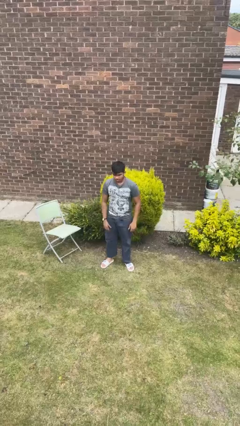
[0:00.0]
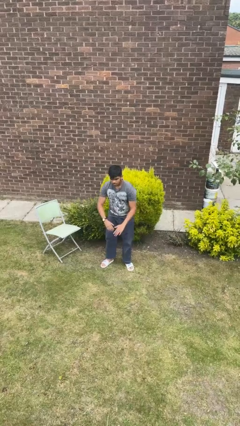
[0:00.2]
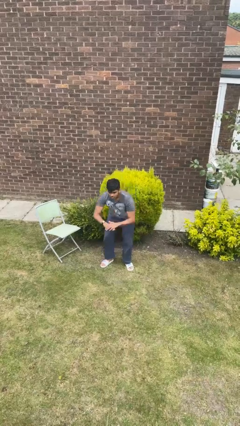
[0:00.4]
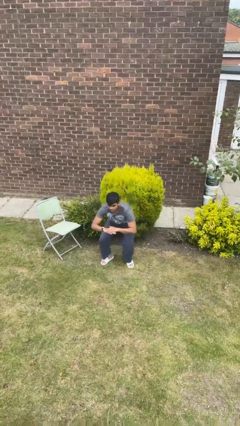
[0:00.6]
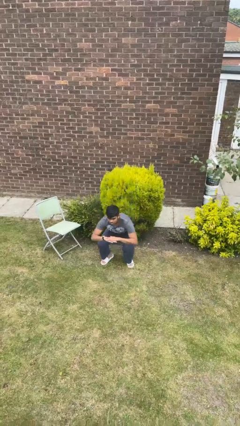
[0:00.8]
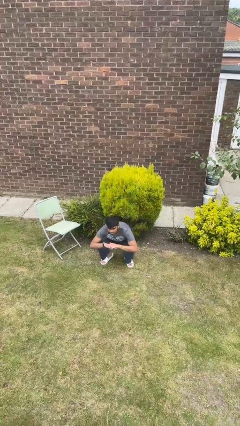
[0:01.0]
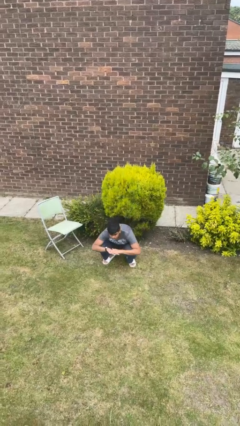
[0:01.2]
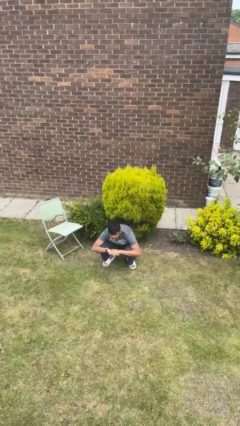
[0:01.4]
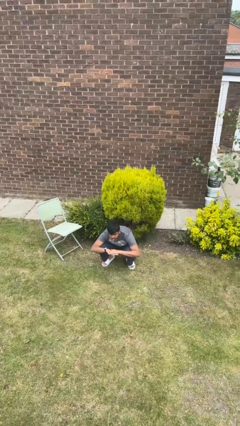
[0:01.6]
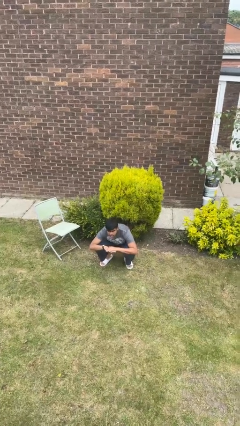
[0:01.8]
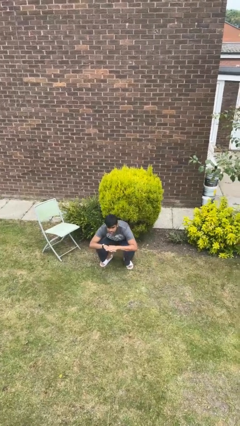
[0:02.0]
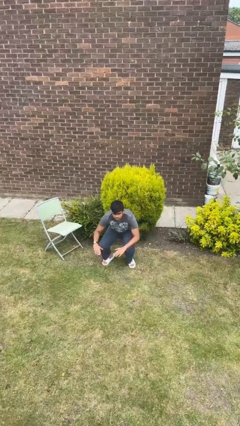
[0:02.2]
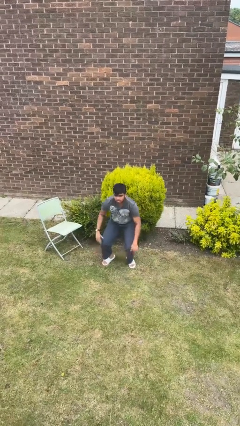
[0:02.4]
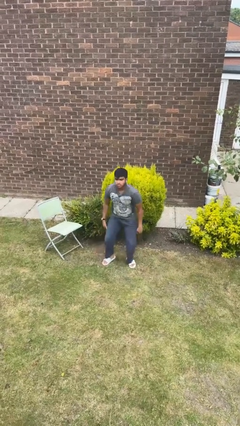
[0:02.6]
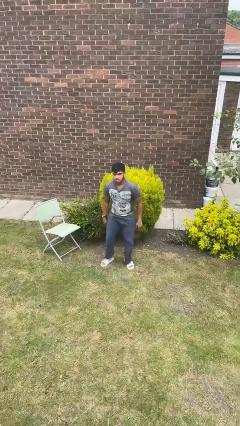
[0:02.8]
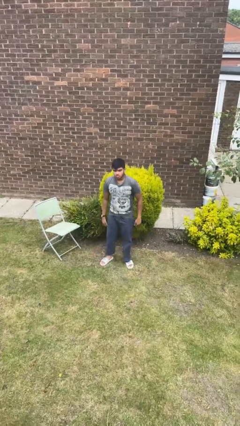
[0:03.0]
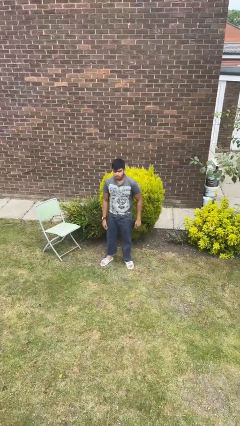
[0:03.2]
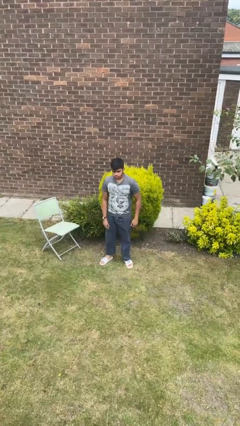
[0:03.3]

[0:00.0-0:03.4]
person squats

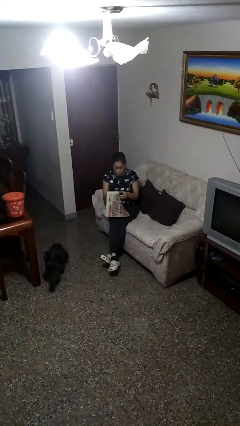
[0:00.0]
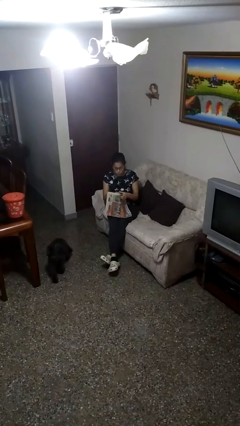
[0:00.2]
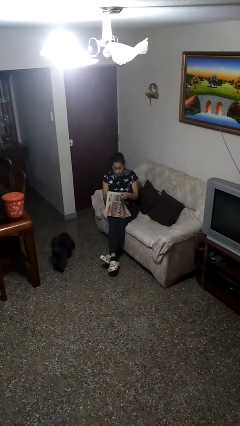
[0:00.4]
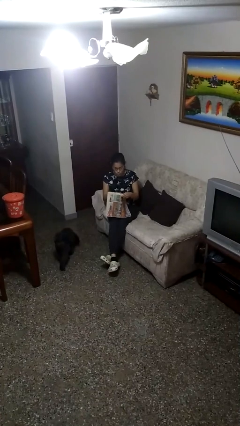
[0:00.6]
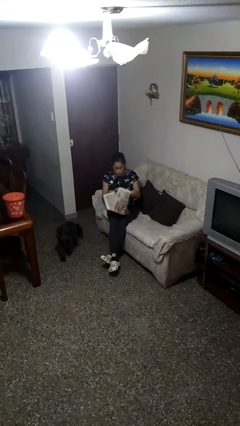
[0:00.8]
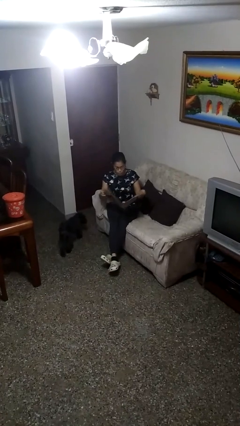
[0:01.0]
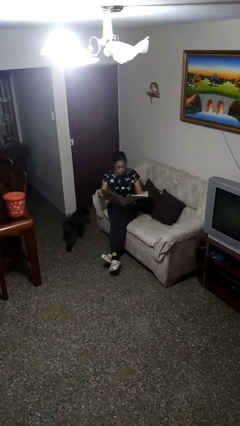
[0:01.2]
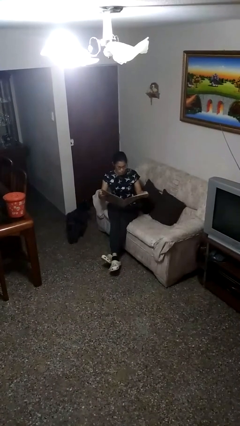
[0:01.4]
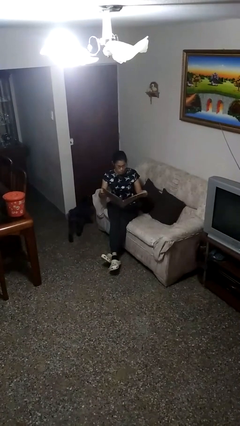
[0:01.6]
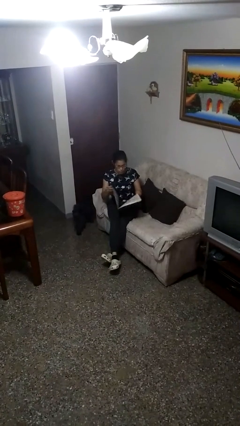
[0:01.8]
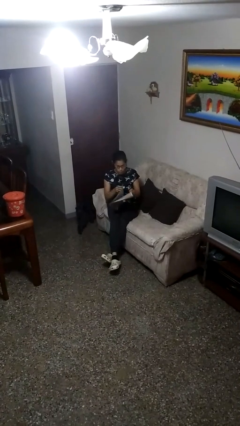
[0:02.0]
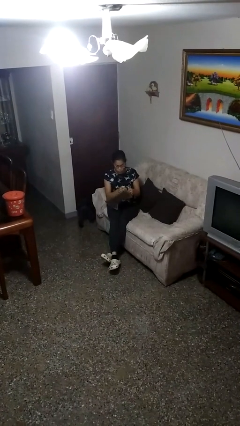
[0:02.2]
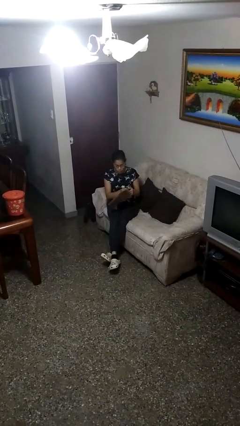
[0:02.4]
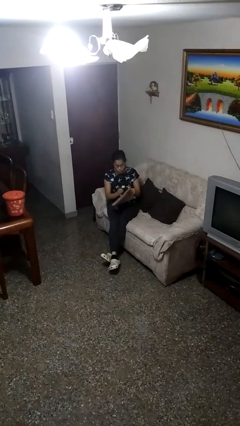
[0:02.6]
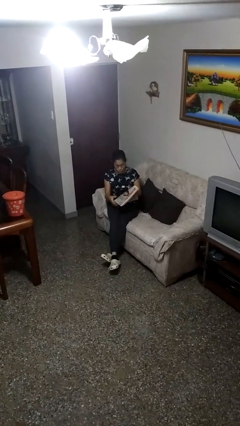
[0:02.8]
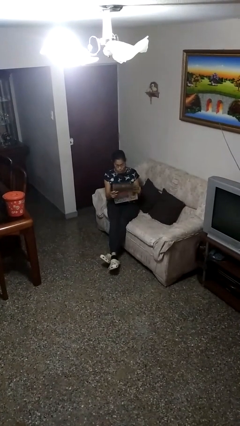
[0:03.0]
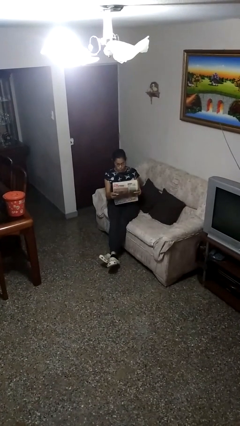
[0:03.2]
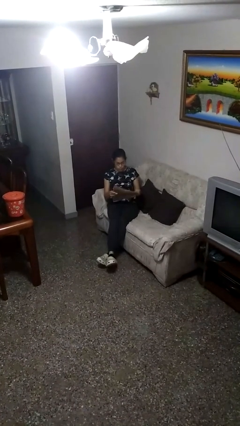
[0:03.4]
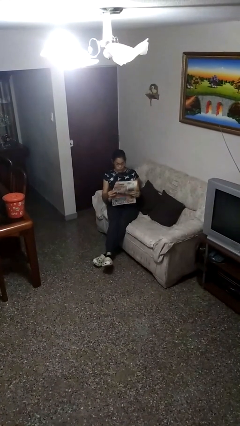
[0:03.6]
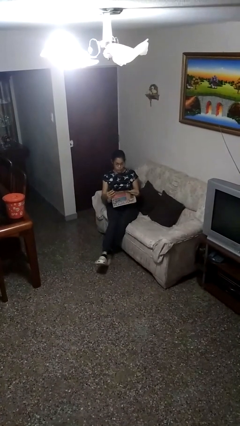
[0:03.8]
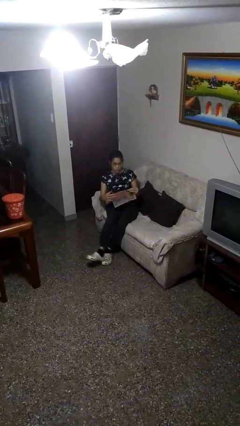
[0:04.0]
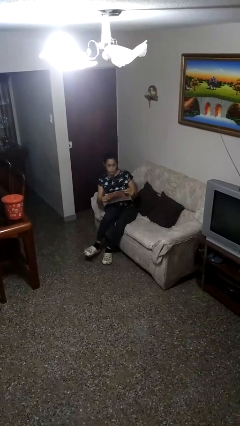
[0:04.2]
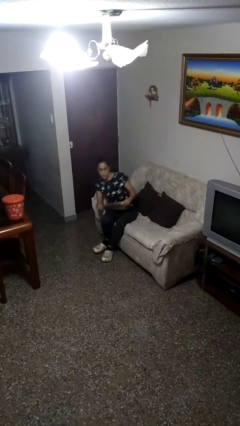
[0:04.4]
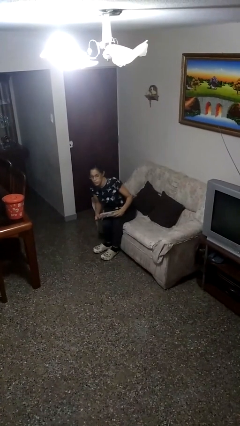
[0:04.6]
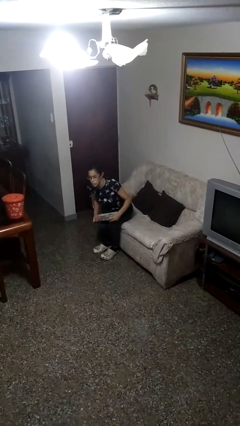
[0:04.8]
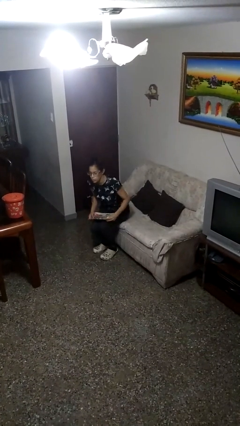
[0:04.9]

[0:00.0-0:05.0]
person reads newspaper

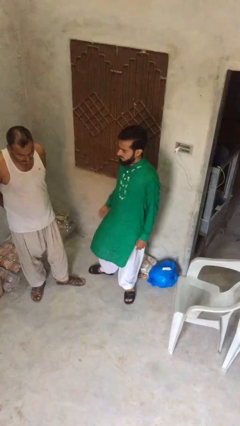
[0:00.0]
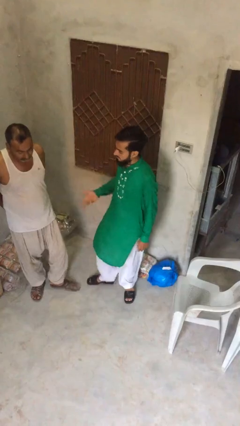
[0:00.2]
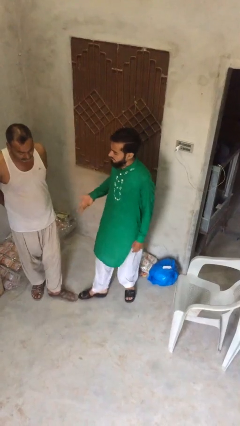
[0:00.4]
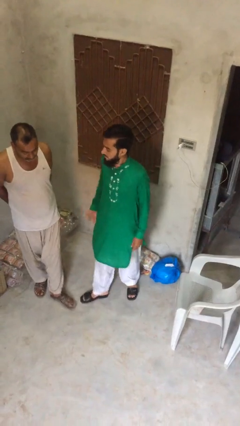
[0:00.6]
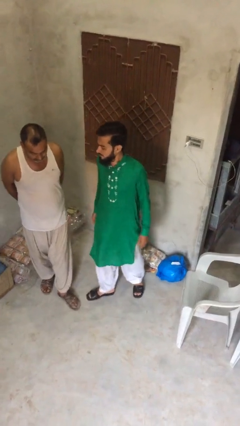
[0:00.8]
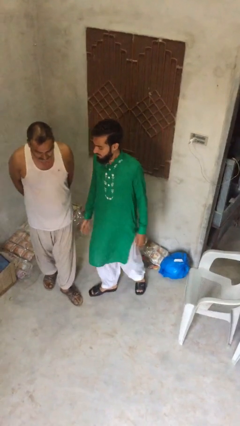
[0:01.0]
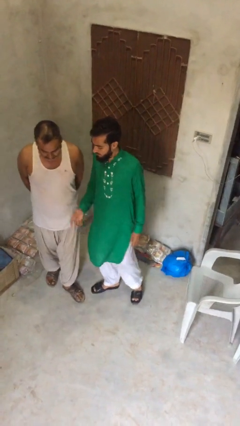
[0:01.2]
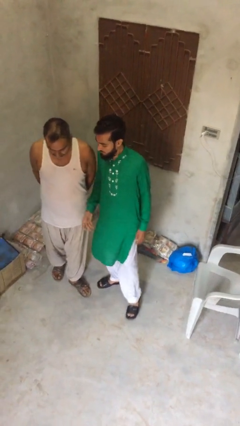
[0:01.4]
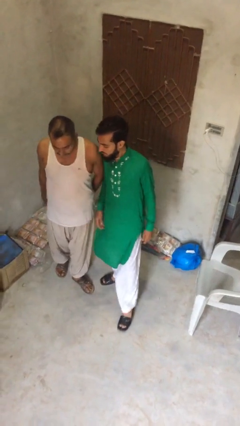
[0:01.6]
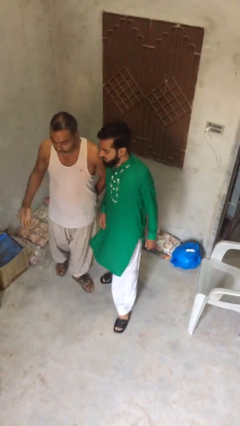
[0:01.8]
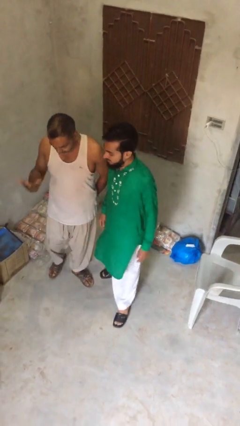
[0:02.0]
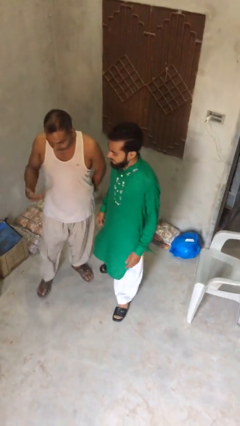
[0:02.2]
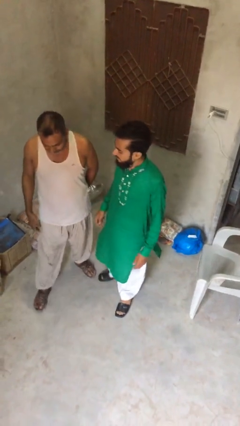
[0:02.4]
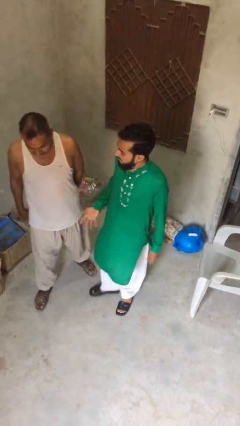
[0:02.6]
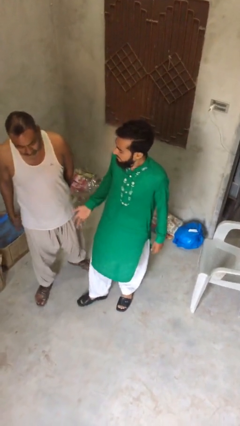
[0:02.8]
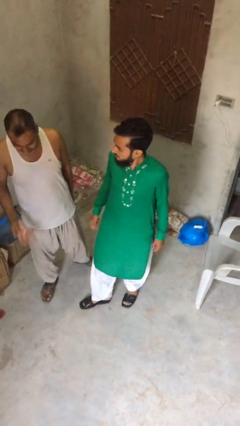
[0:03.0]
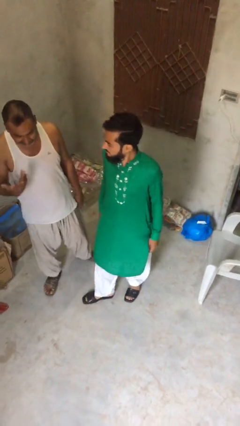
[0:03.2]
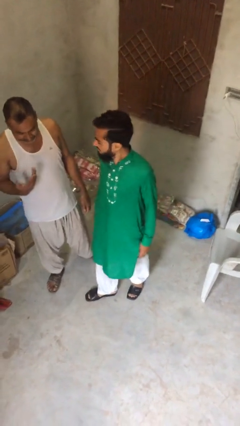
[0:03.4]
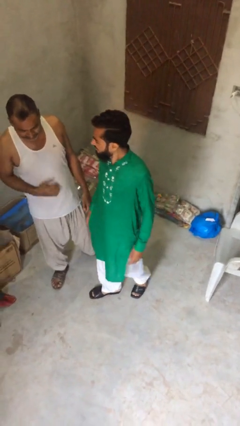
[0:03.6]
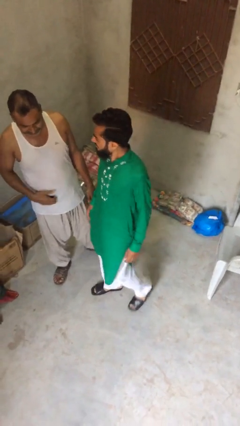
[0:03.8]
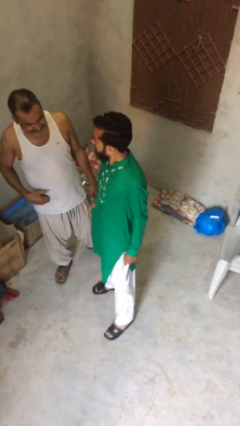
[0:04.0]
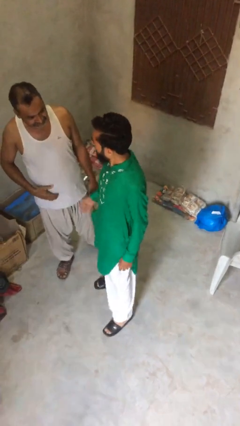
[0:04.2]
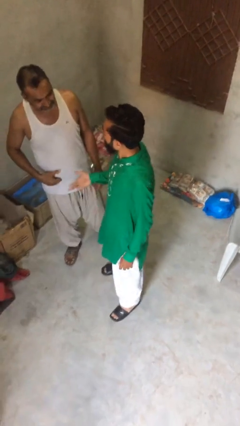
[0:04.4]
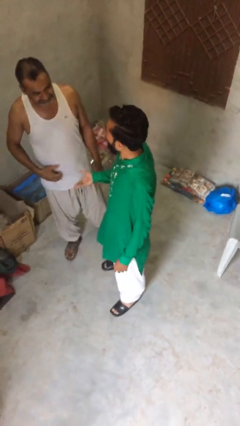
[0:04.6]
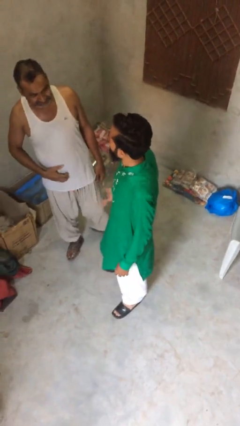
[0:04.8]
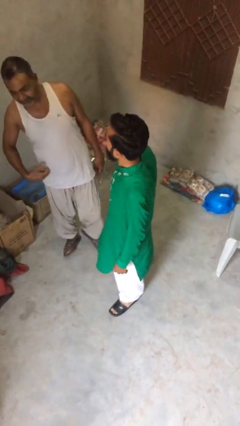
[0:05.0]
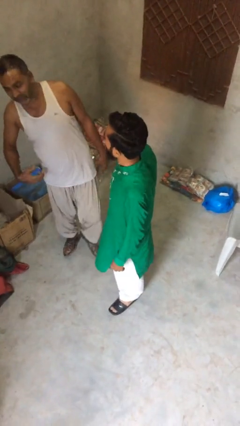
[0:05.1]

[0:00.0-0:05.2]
person talks to person

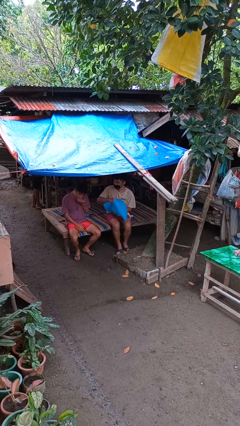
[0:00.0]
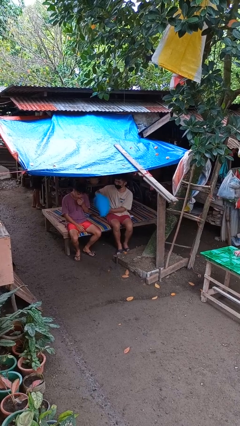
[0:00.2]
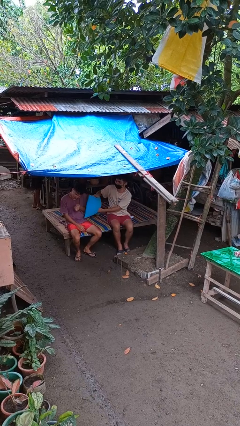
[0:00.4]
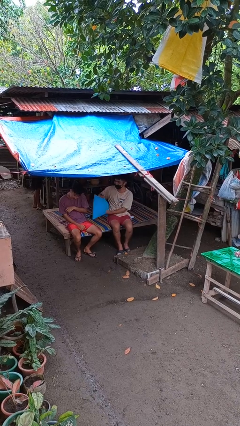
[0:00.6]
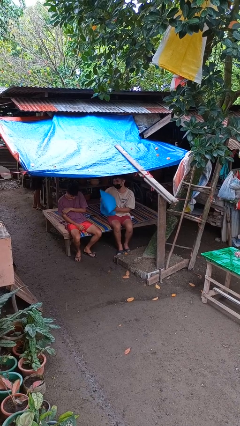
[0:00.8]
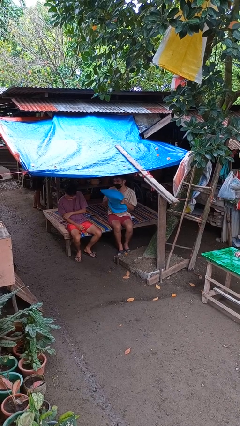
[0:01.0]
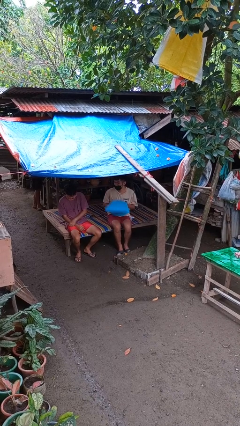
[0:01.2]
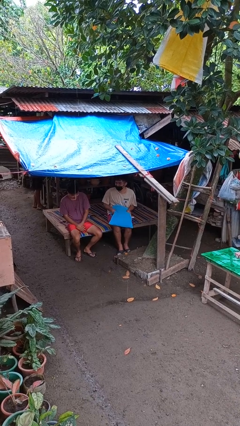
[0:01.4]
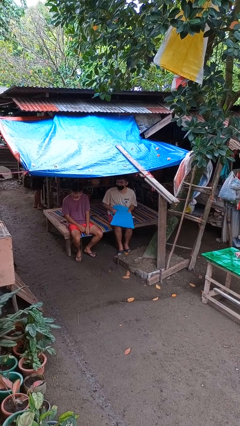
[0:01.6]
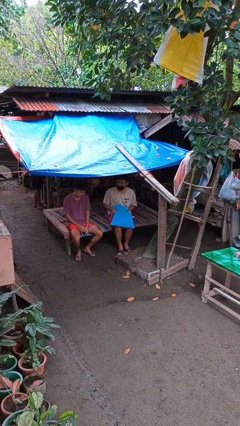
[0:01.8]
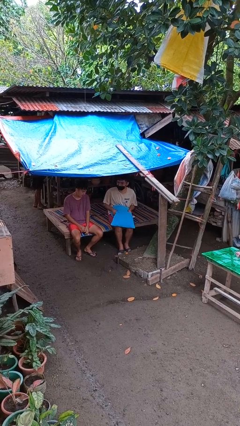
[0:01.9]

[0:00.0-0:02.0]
person hits person with pillow

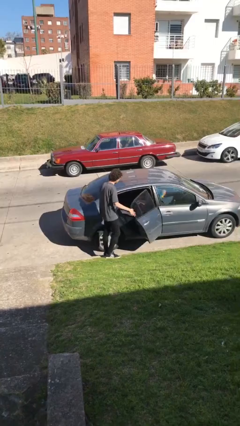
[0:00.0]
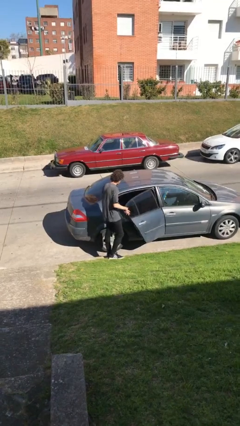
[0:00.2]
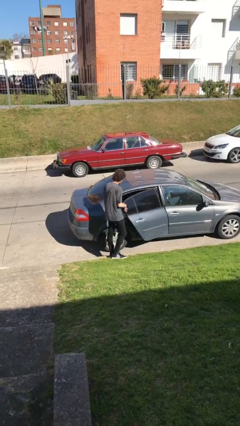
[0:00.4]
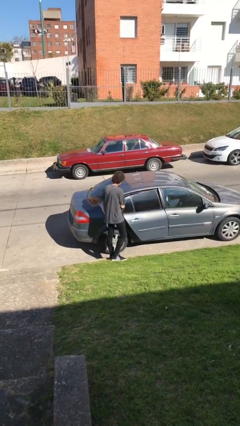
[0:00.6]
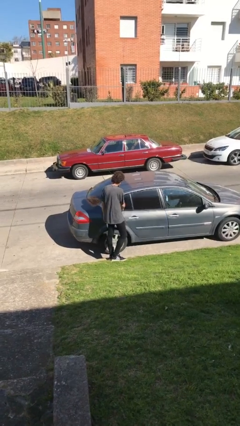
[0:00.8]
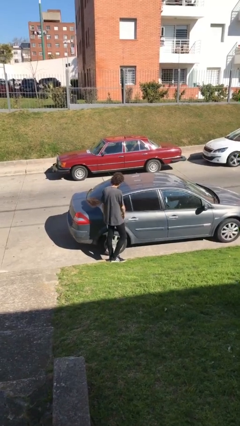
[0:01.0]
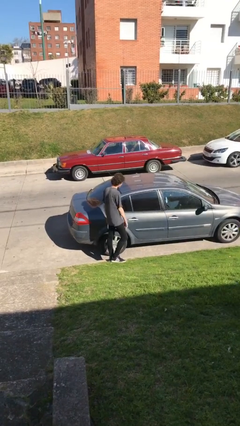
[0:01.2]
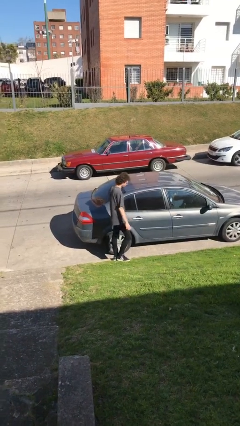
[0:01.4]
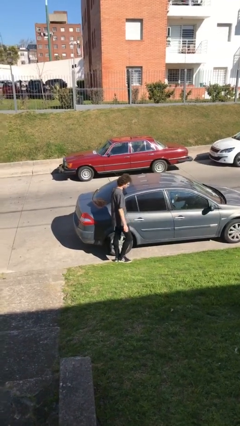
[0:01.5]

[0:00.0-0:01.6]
person closes car door

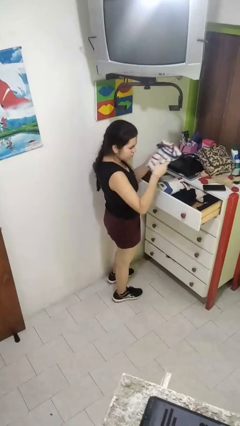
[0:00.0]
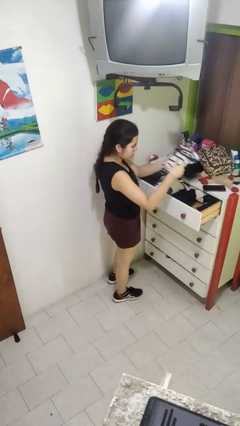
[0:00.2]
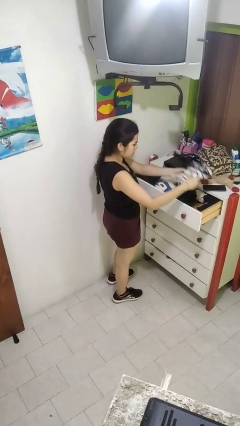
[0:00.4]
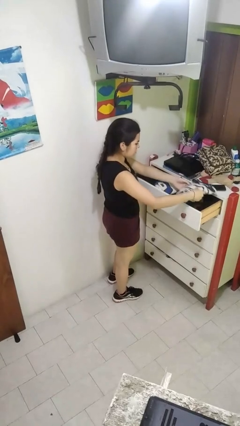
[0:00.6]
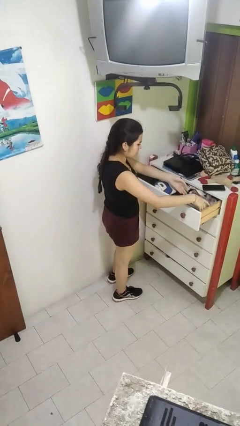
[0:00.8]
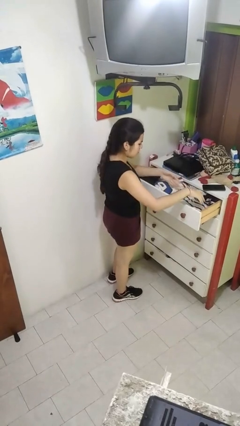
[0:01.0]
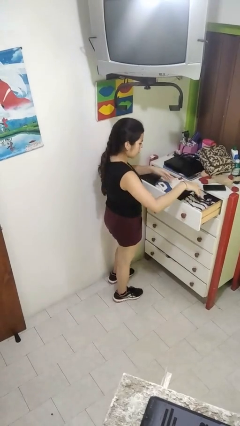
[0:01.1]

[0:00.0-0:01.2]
person puts clothes into dresser
